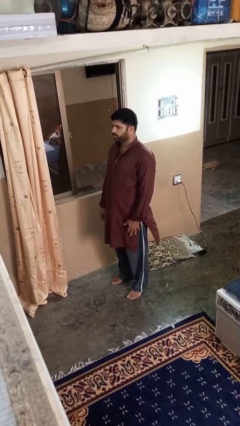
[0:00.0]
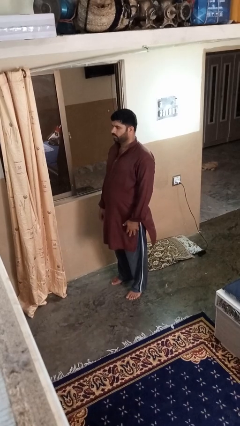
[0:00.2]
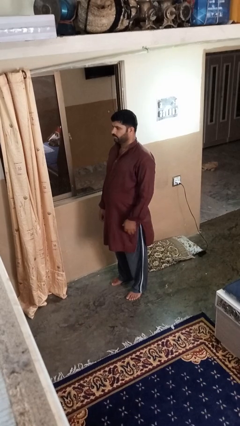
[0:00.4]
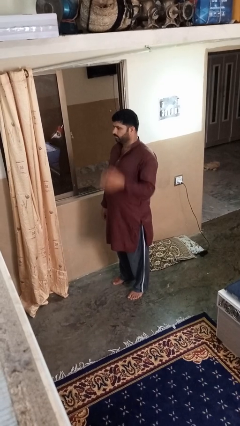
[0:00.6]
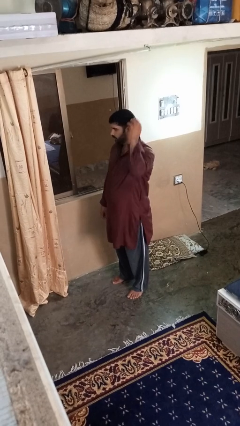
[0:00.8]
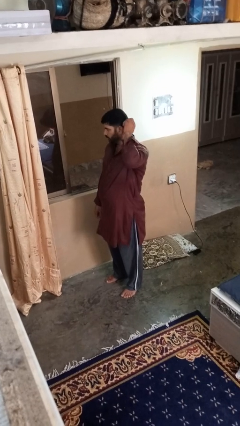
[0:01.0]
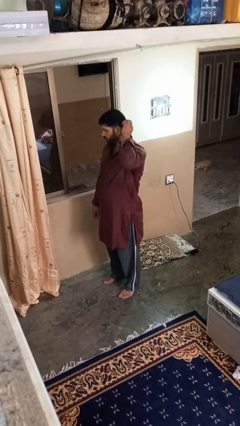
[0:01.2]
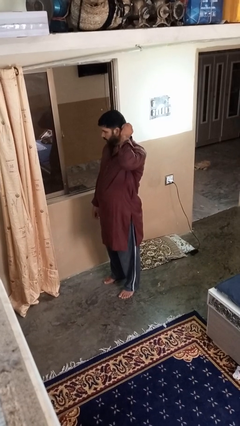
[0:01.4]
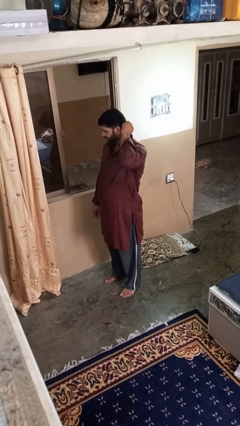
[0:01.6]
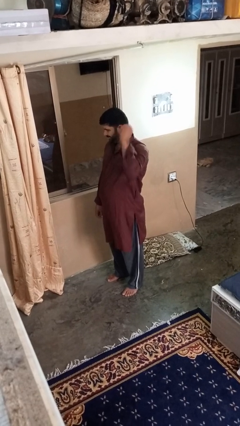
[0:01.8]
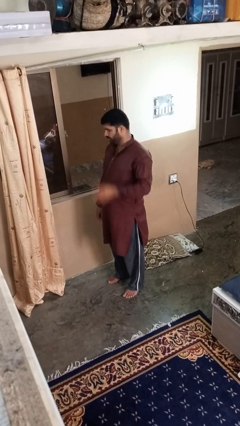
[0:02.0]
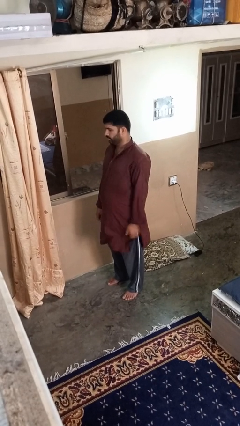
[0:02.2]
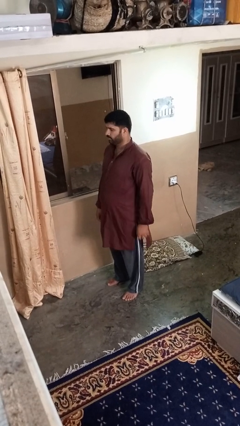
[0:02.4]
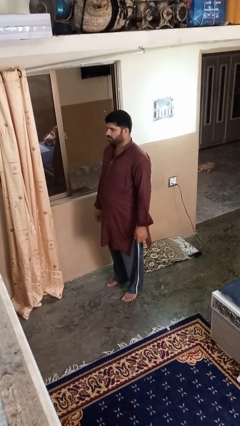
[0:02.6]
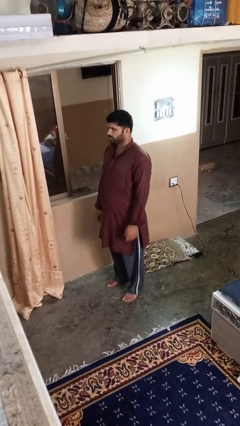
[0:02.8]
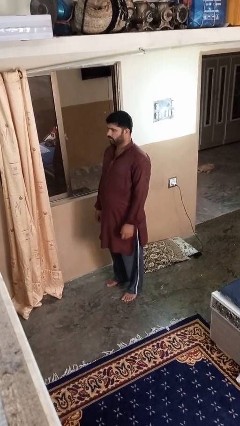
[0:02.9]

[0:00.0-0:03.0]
person strokes hair

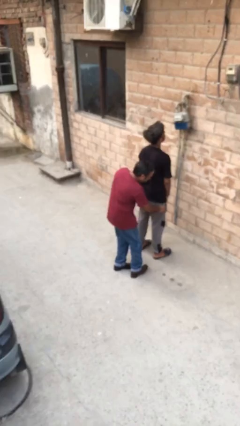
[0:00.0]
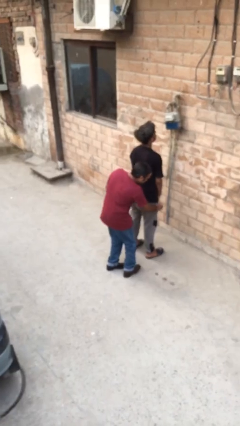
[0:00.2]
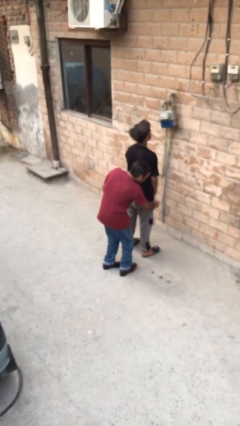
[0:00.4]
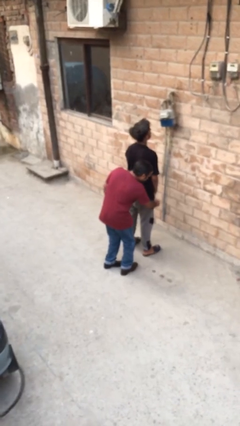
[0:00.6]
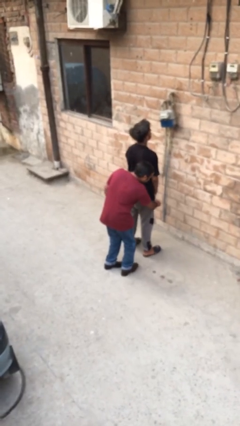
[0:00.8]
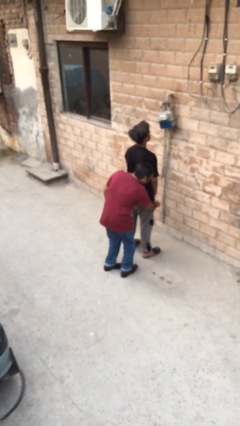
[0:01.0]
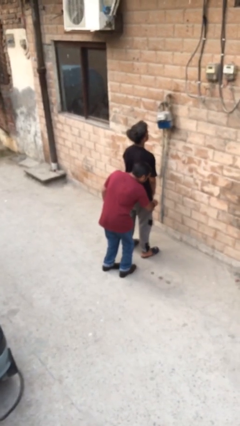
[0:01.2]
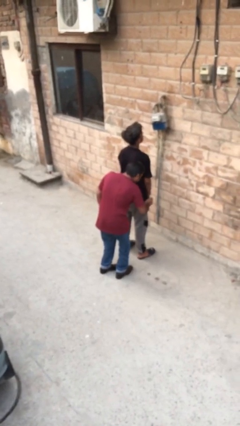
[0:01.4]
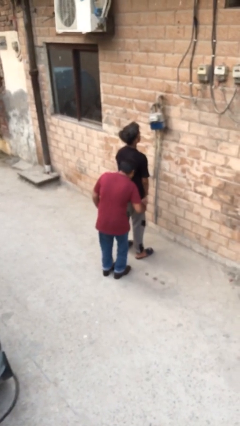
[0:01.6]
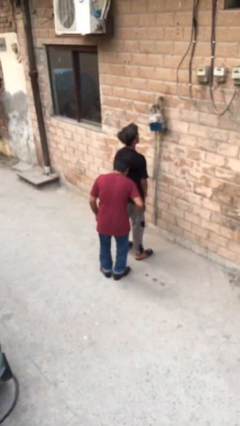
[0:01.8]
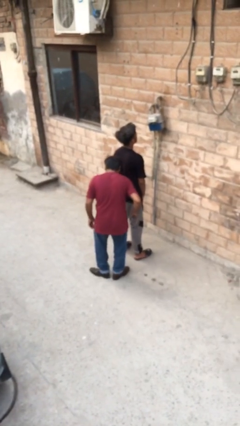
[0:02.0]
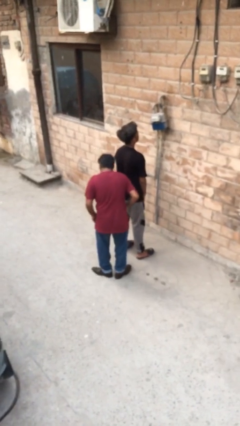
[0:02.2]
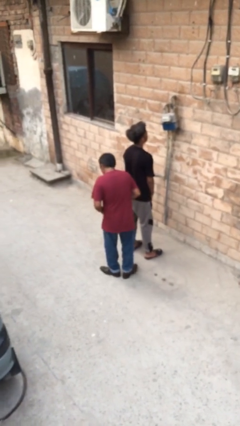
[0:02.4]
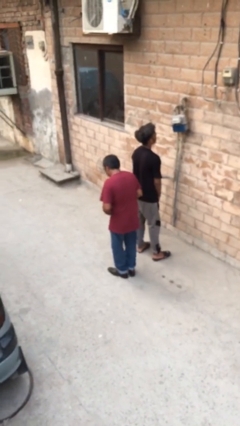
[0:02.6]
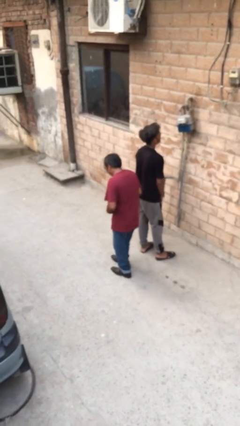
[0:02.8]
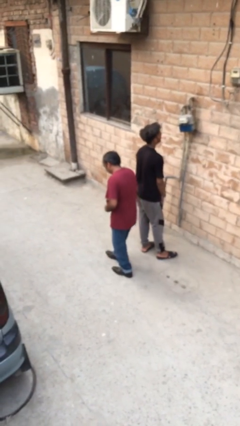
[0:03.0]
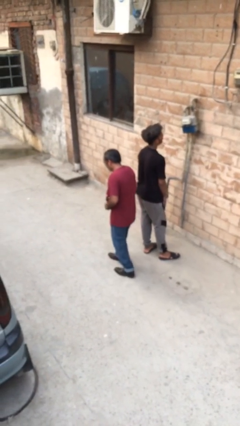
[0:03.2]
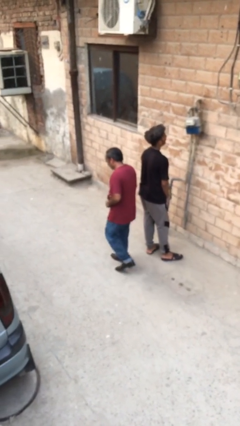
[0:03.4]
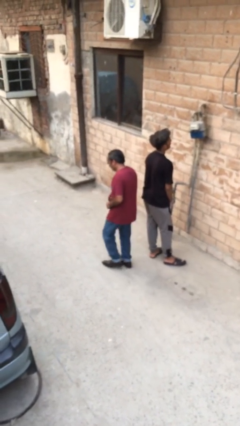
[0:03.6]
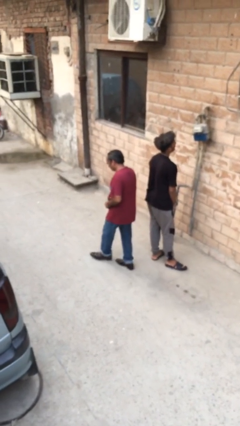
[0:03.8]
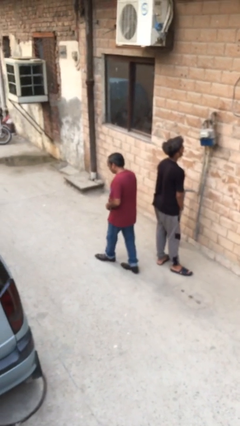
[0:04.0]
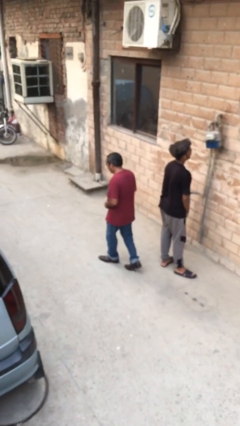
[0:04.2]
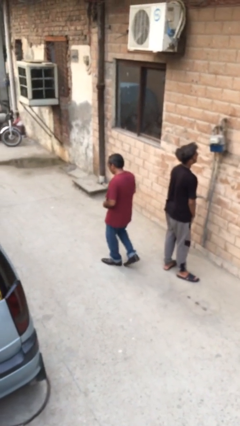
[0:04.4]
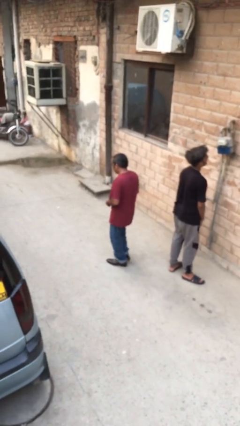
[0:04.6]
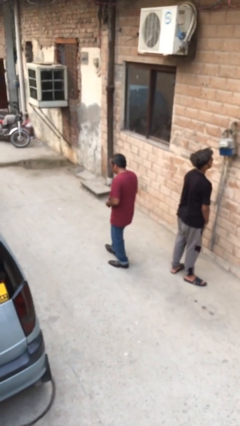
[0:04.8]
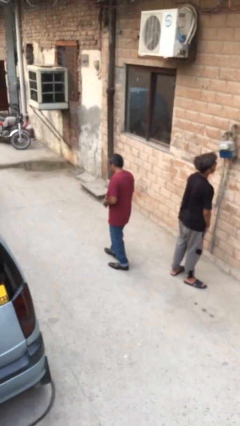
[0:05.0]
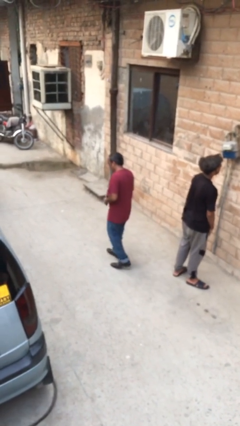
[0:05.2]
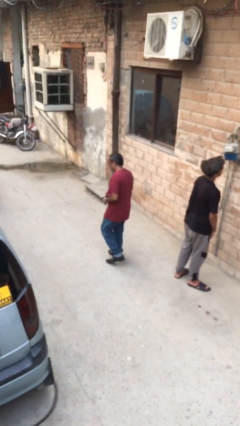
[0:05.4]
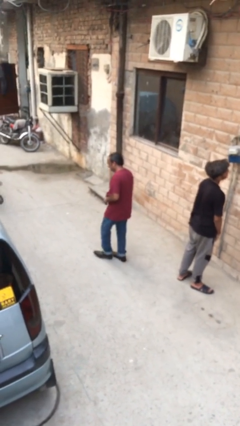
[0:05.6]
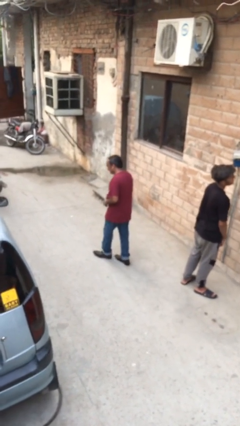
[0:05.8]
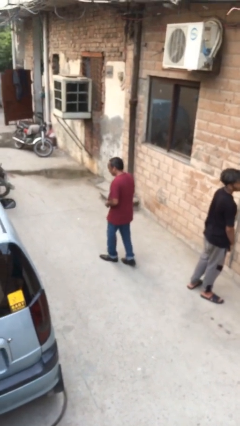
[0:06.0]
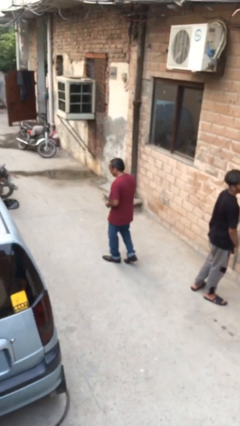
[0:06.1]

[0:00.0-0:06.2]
person steals object from person

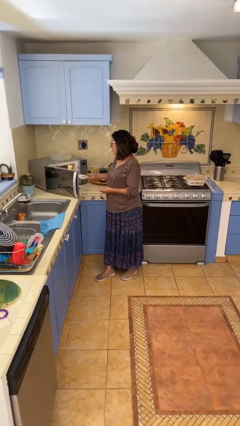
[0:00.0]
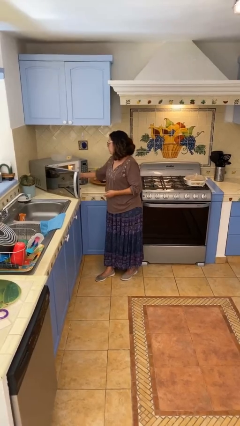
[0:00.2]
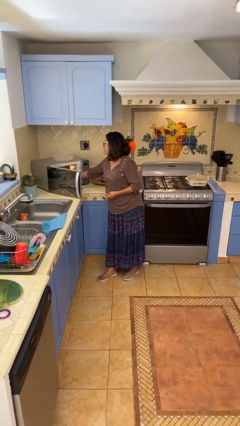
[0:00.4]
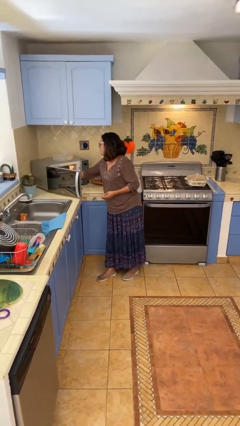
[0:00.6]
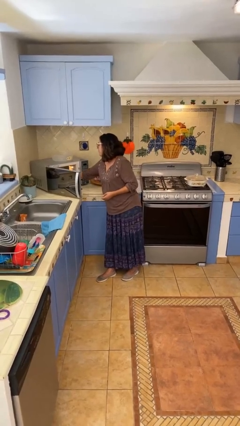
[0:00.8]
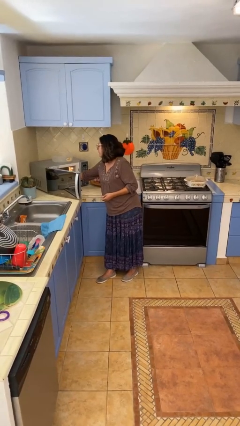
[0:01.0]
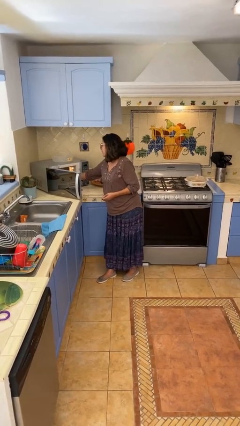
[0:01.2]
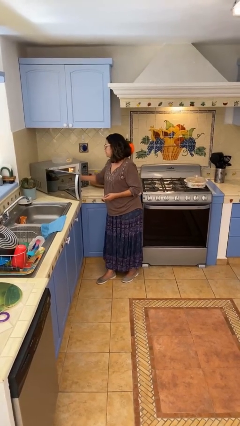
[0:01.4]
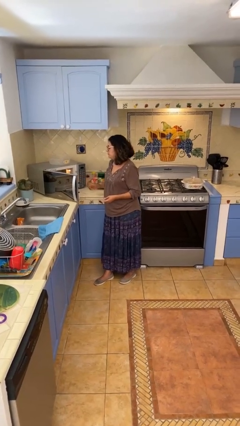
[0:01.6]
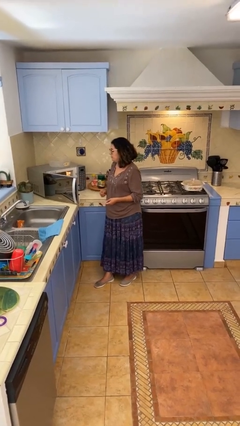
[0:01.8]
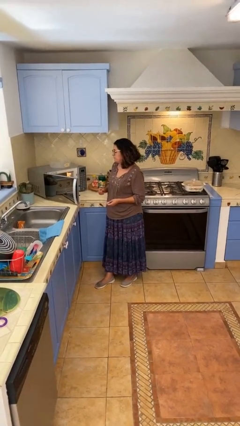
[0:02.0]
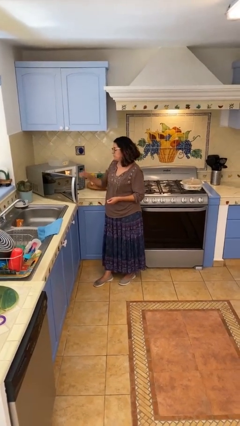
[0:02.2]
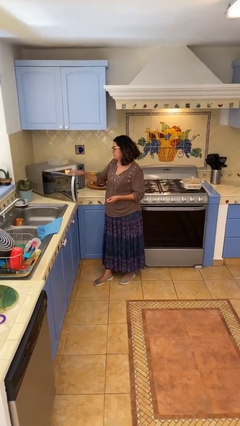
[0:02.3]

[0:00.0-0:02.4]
person puts object into microwave

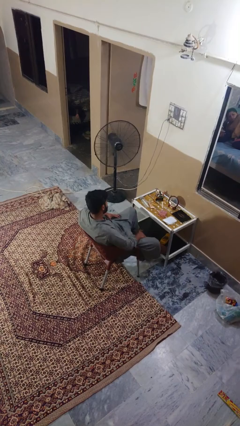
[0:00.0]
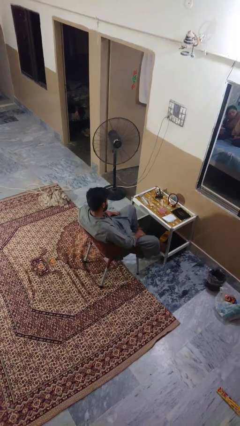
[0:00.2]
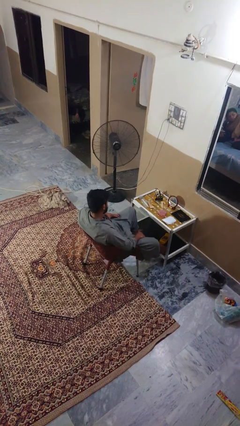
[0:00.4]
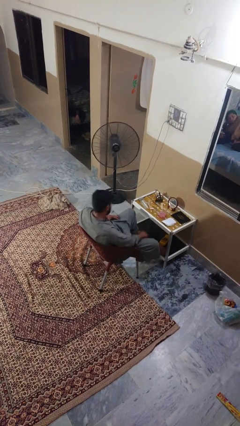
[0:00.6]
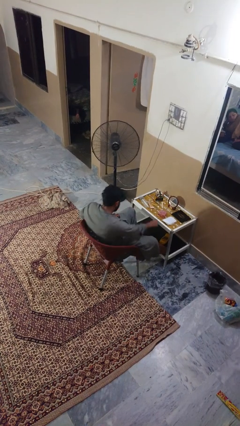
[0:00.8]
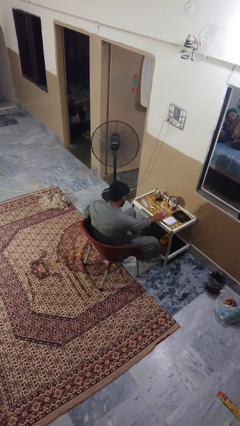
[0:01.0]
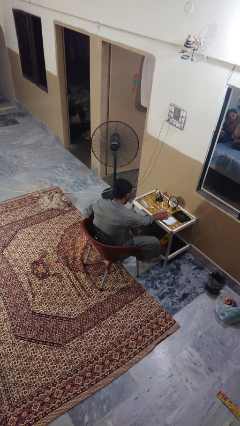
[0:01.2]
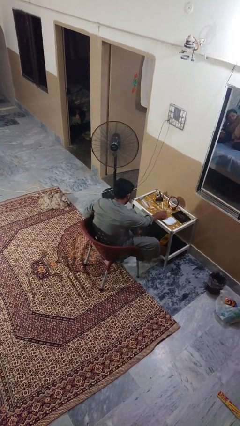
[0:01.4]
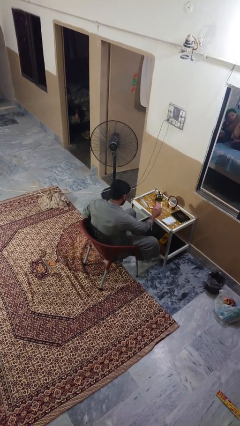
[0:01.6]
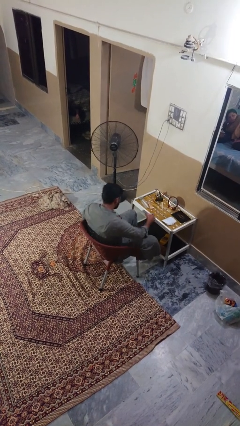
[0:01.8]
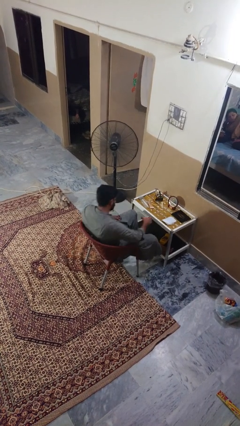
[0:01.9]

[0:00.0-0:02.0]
person picks up object from table

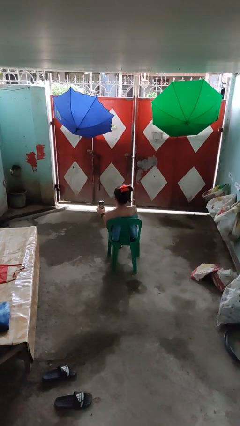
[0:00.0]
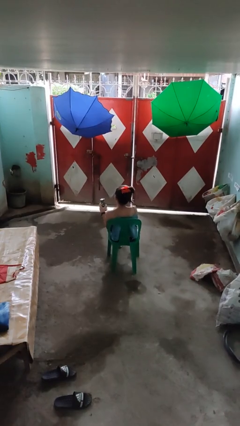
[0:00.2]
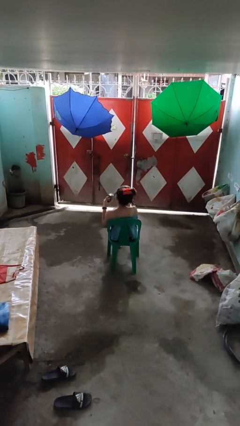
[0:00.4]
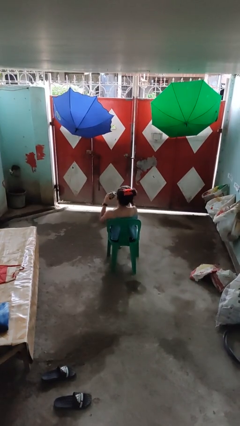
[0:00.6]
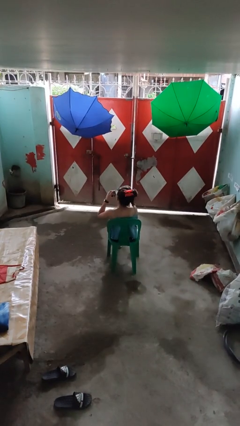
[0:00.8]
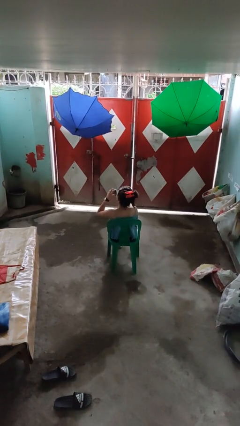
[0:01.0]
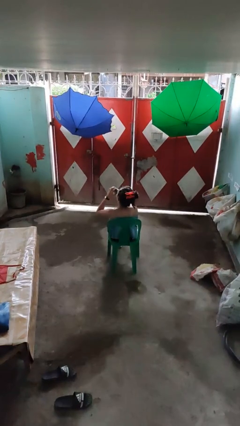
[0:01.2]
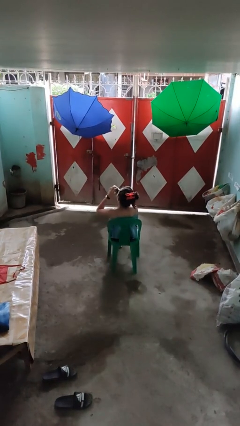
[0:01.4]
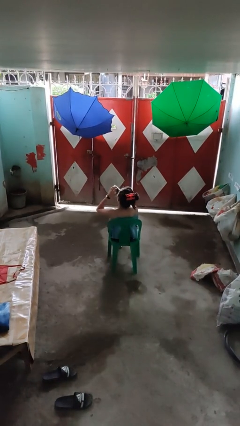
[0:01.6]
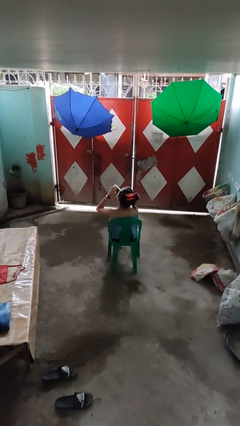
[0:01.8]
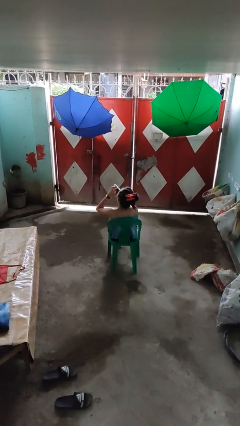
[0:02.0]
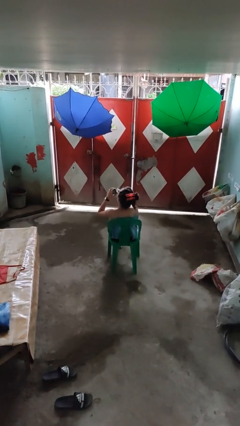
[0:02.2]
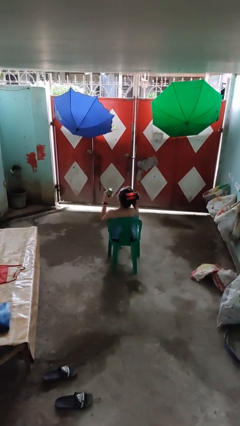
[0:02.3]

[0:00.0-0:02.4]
person drinks from beverage can

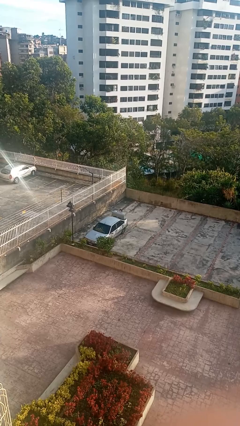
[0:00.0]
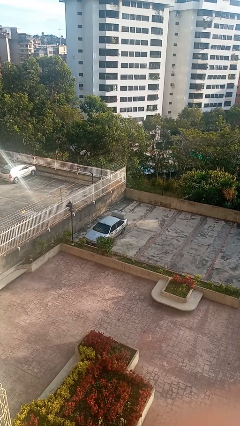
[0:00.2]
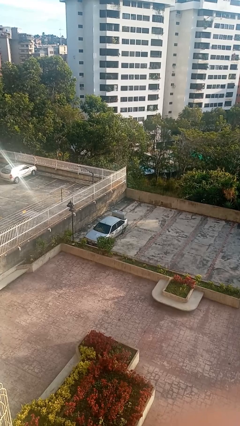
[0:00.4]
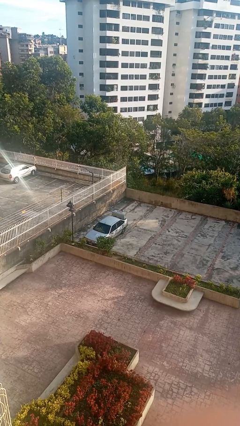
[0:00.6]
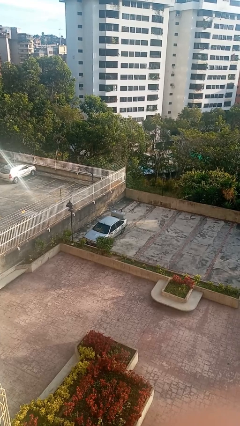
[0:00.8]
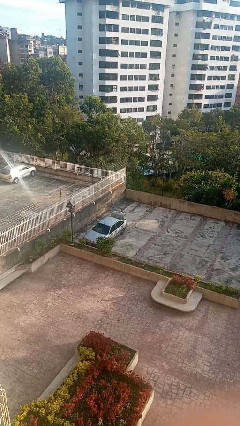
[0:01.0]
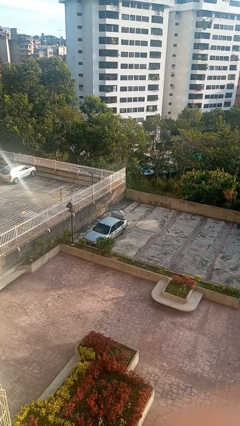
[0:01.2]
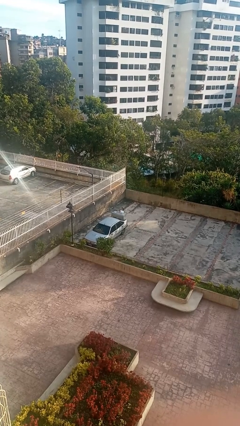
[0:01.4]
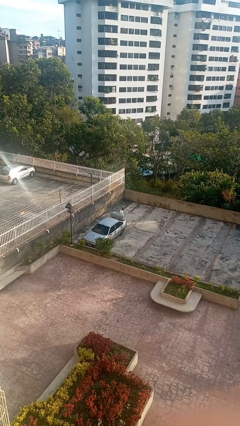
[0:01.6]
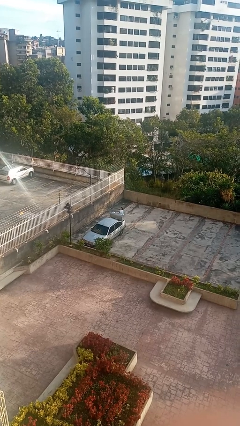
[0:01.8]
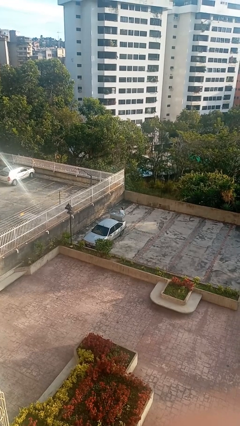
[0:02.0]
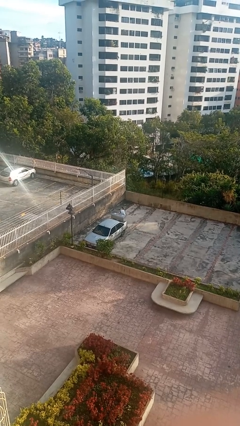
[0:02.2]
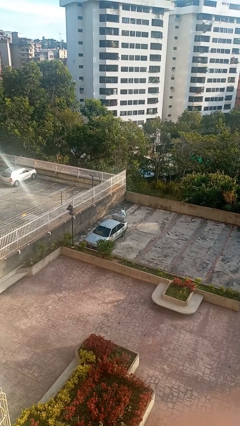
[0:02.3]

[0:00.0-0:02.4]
person unloads car
